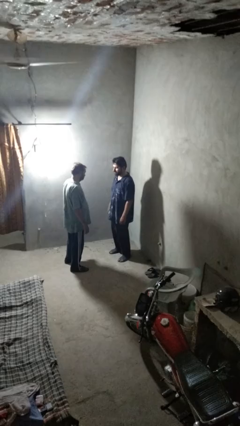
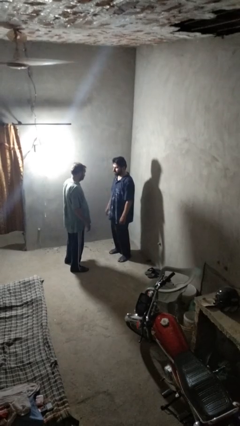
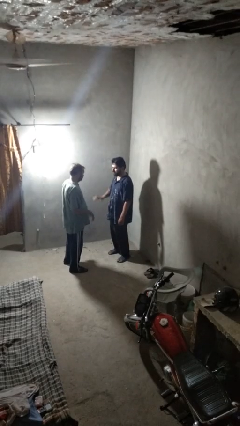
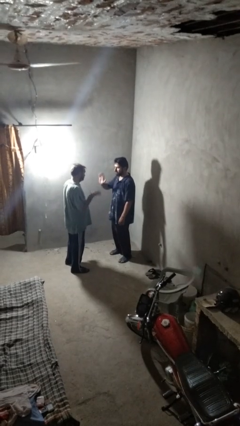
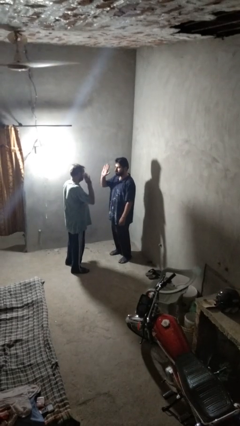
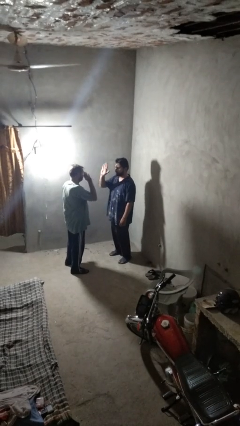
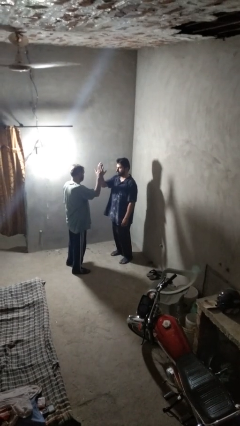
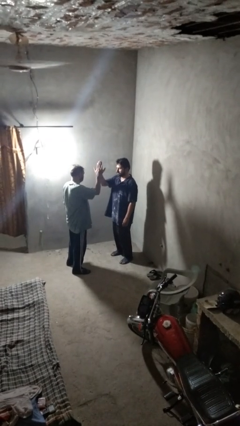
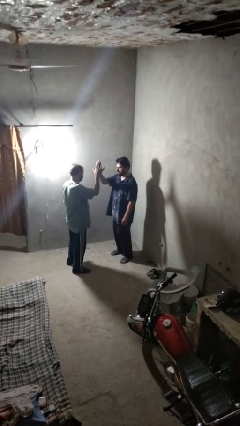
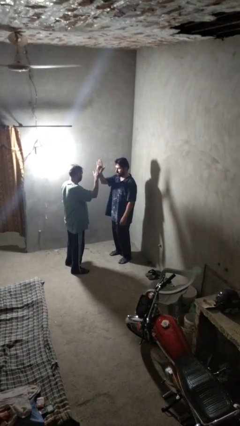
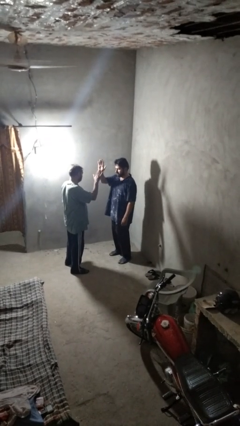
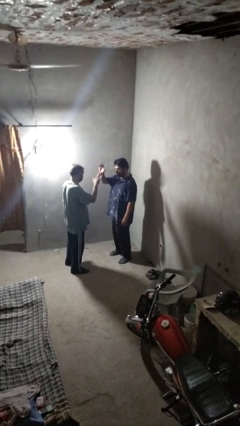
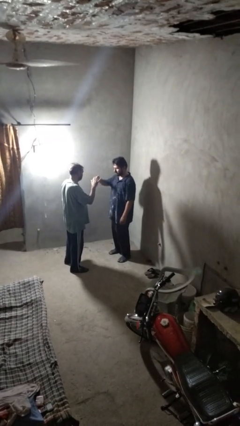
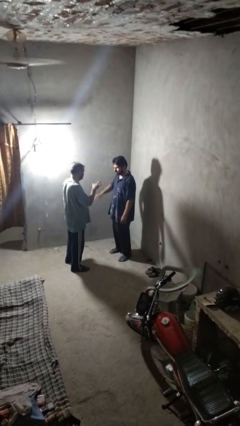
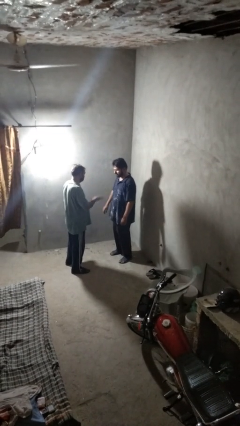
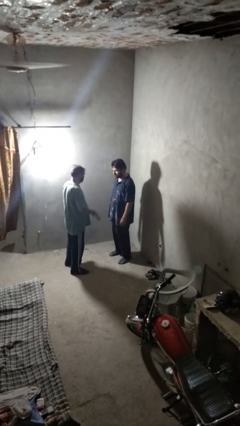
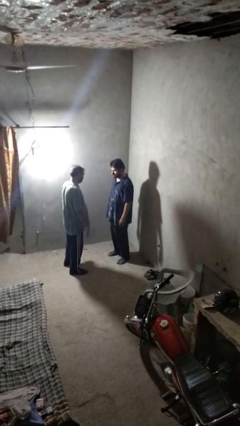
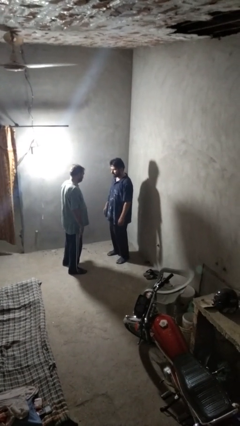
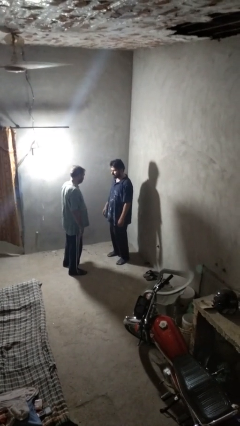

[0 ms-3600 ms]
person highfives hand

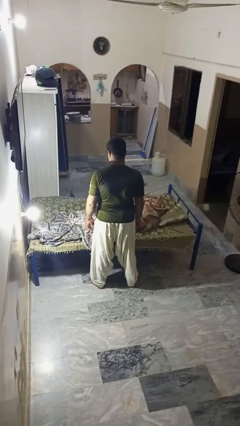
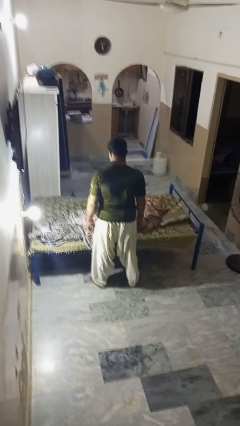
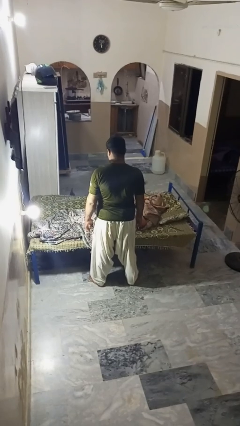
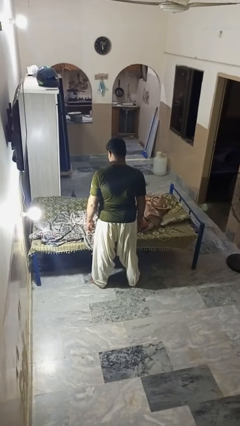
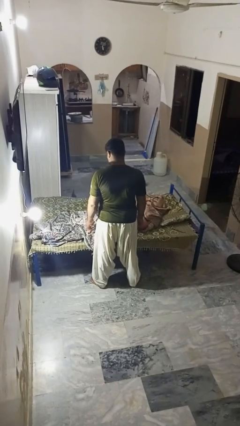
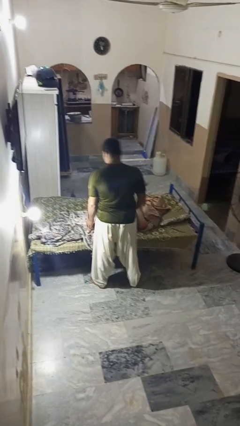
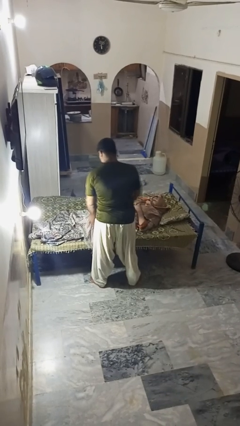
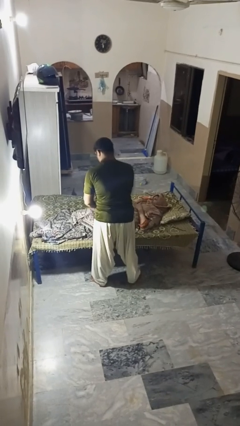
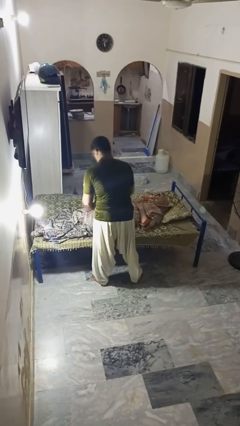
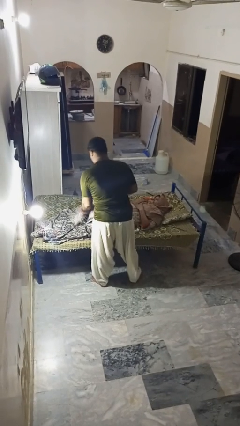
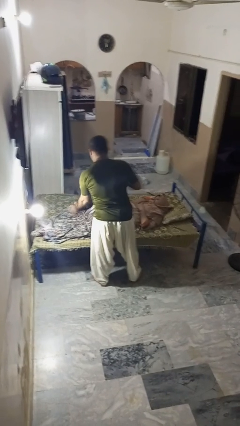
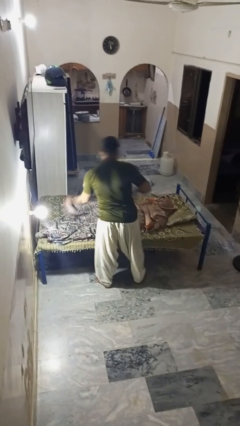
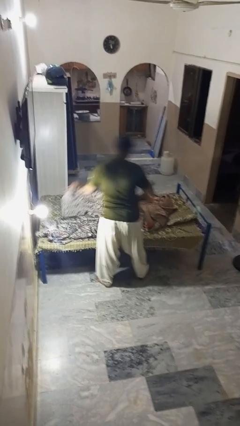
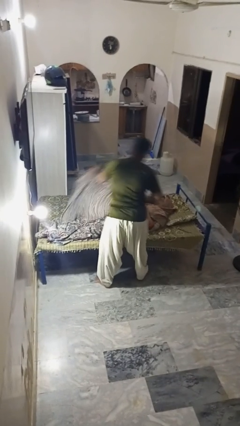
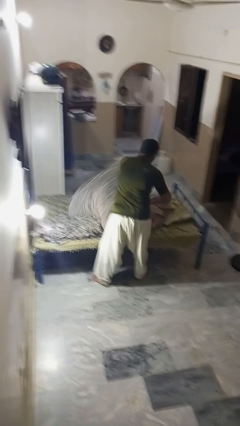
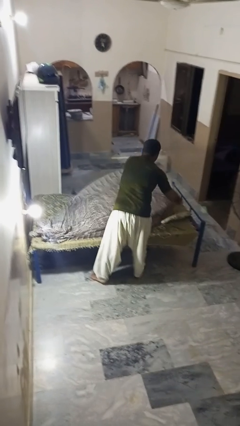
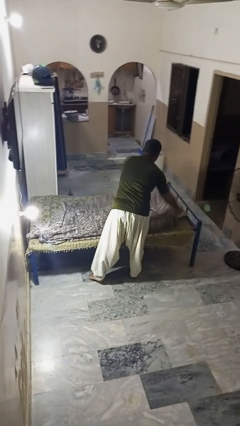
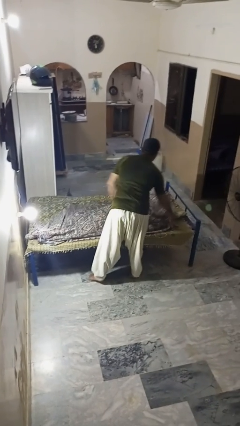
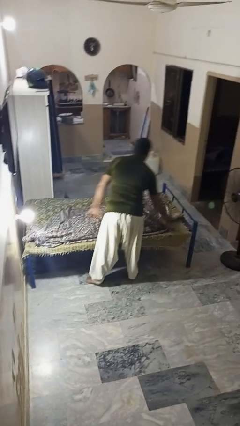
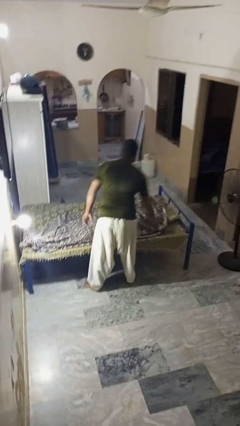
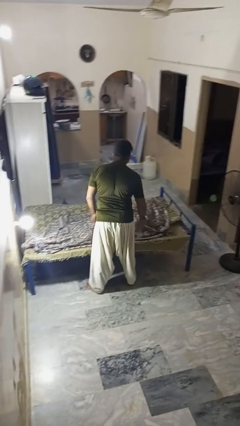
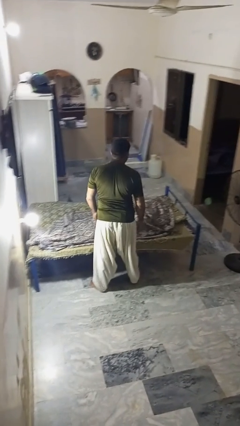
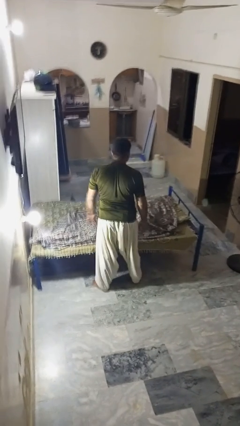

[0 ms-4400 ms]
person covers friend with blanket

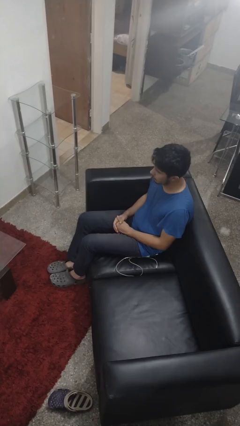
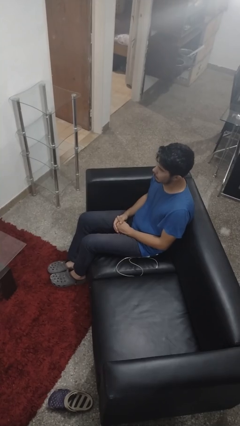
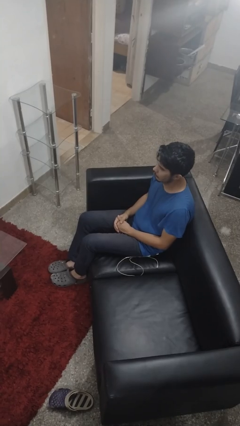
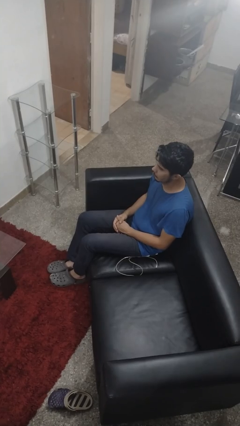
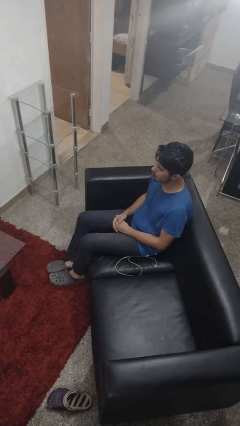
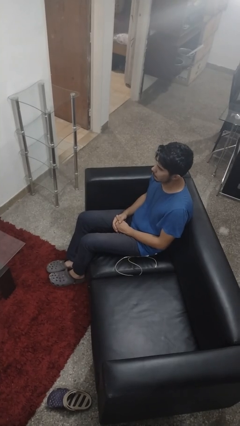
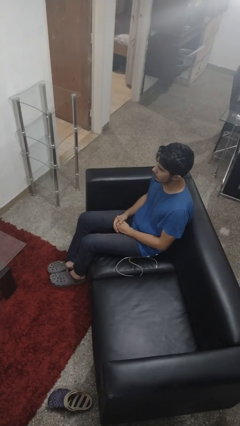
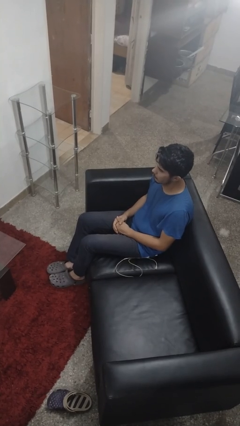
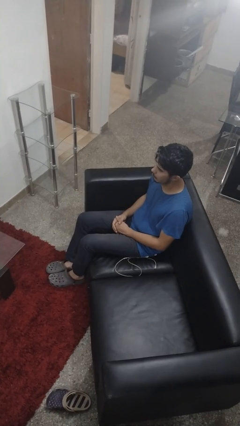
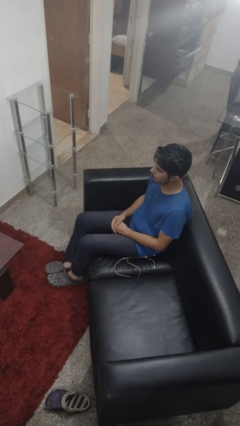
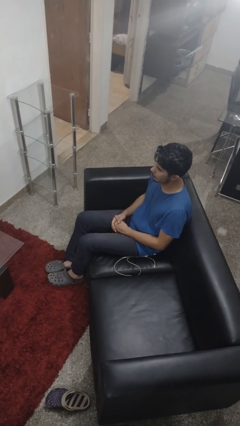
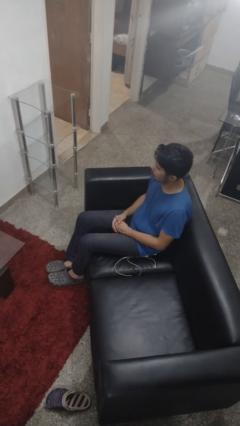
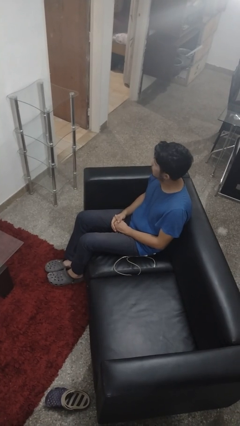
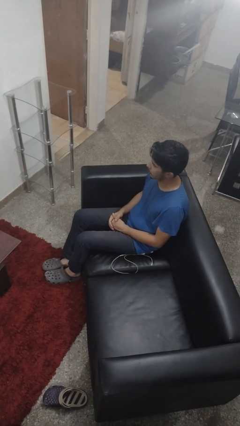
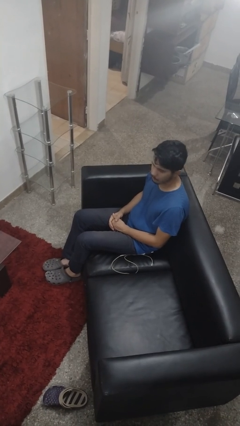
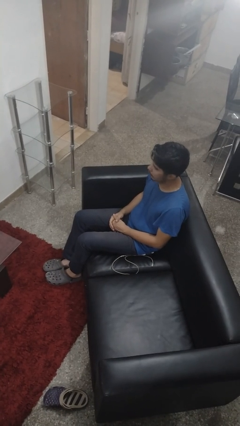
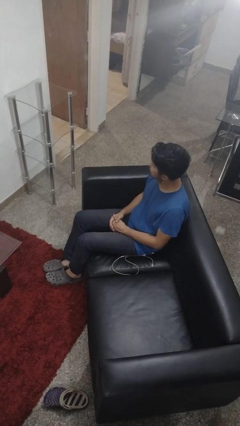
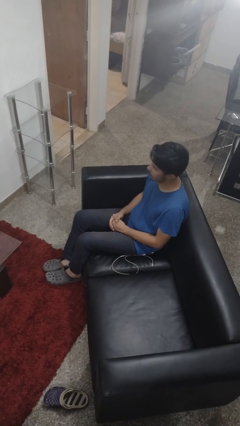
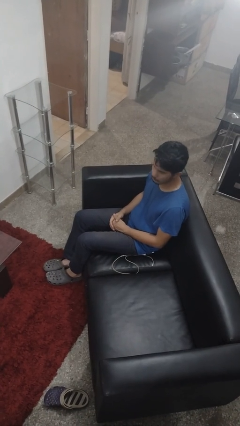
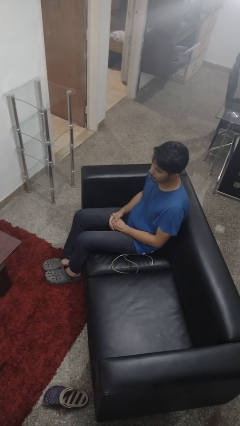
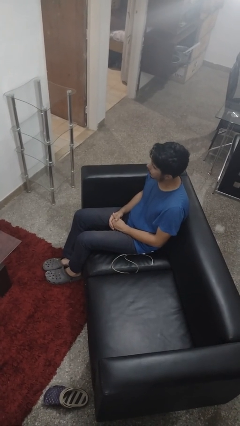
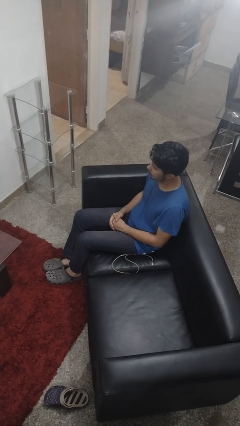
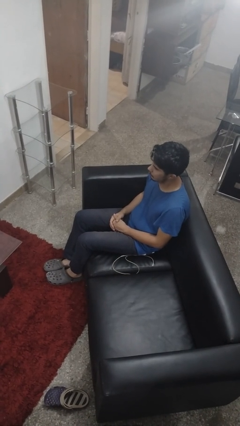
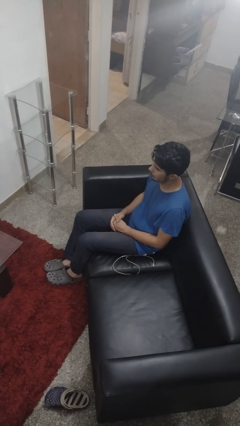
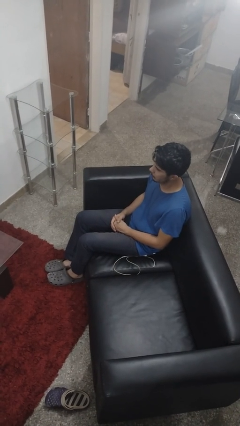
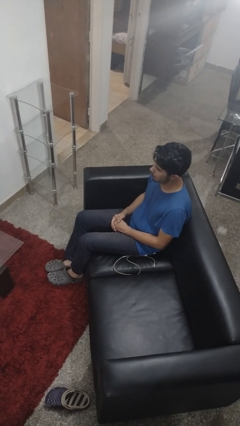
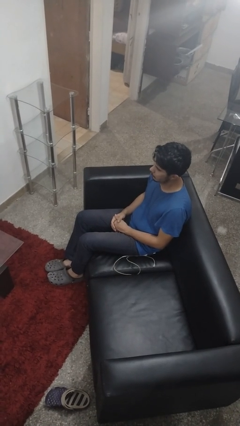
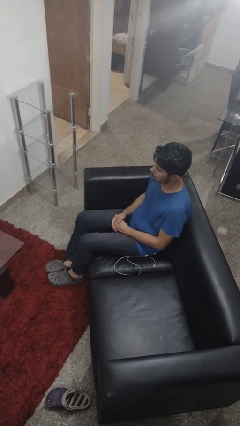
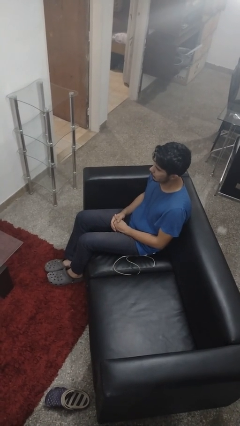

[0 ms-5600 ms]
person shakes head

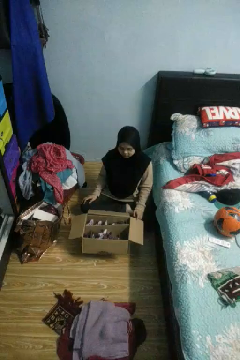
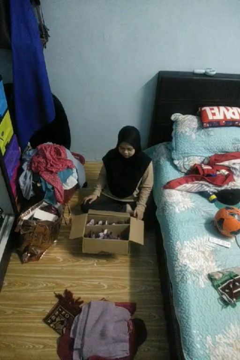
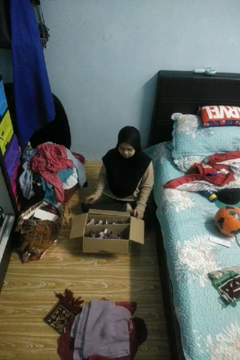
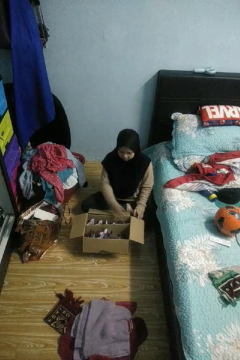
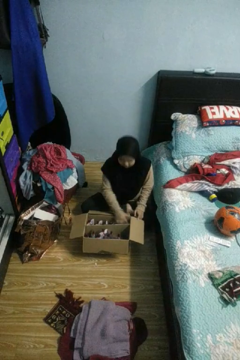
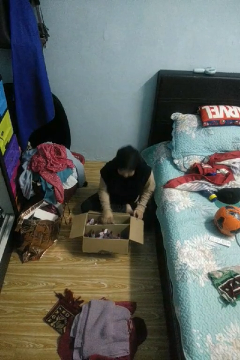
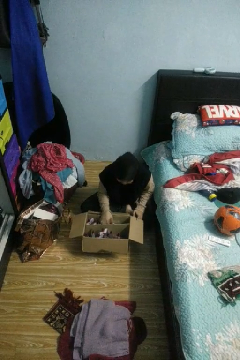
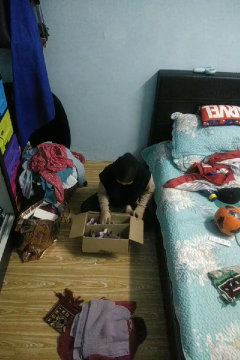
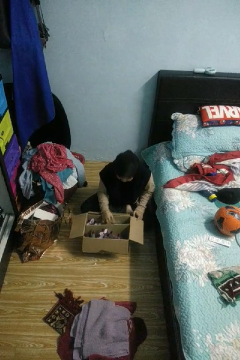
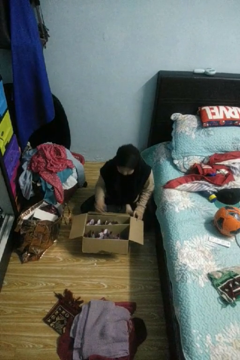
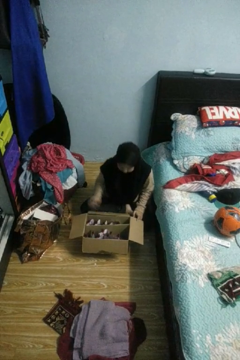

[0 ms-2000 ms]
person searches in box

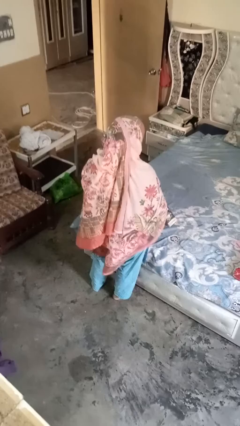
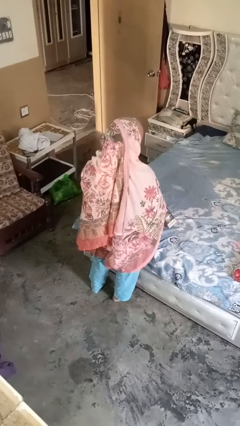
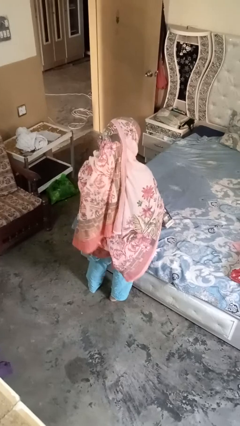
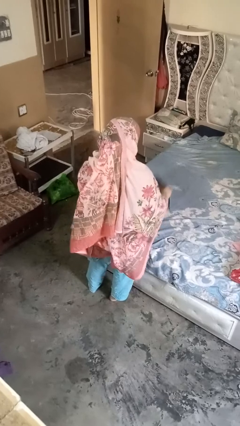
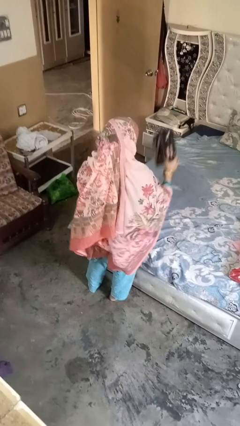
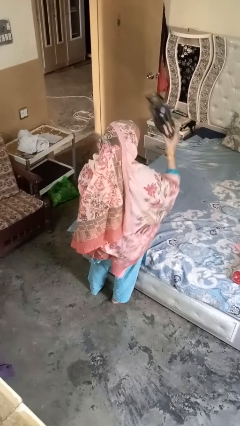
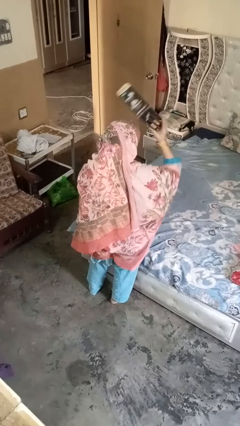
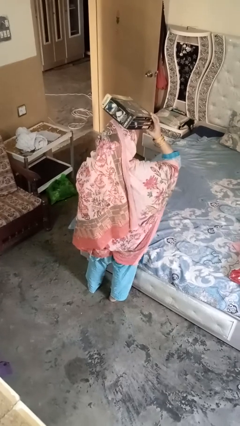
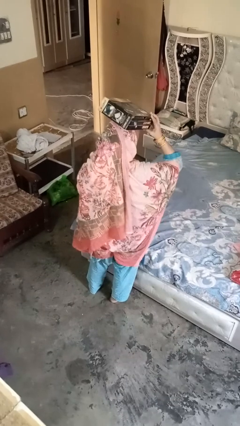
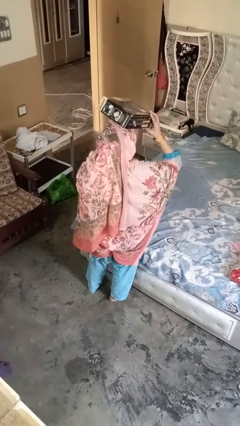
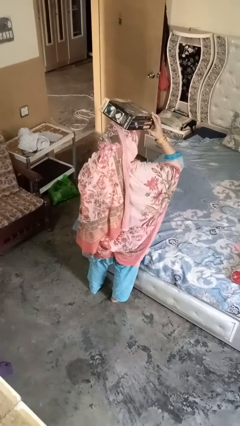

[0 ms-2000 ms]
person holds object above head

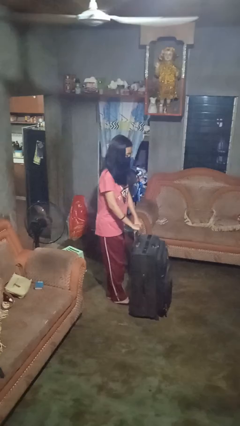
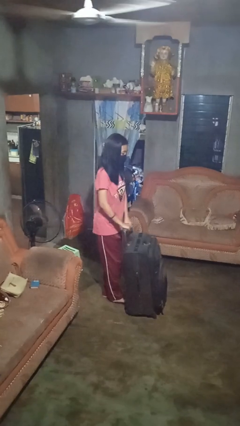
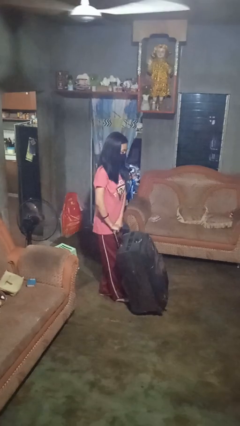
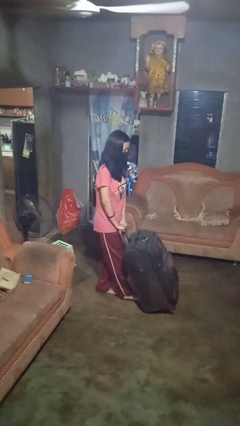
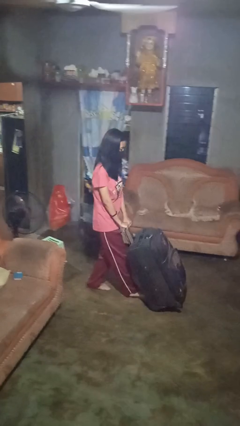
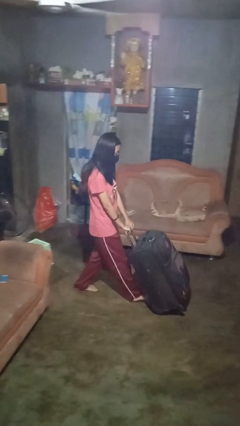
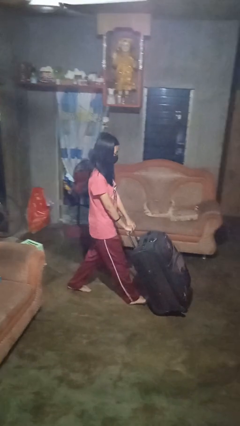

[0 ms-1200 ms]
person pushes wheeled cart
